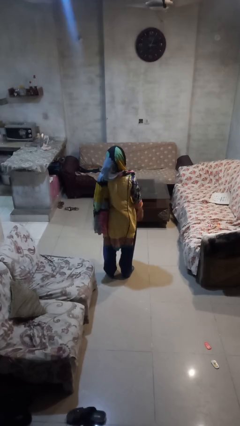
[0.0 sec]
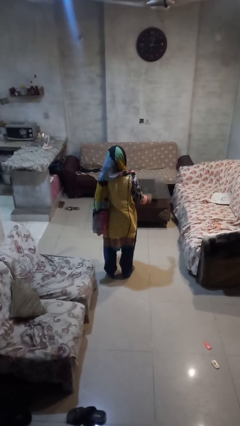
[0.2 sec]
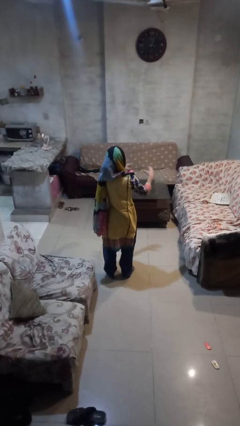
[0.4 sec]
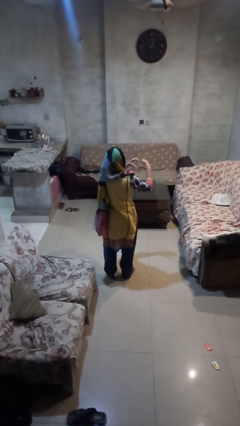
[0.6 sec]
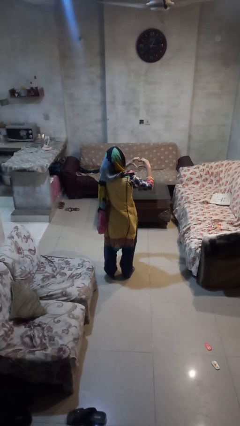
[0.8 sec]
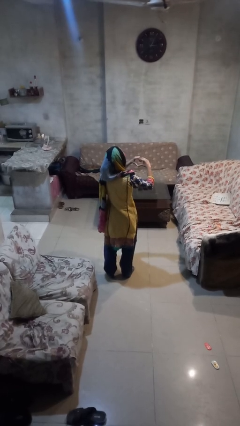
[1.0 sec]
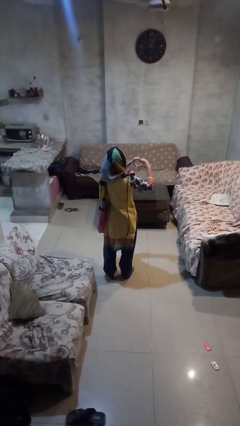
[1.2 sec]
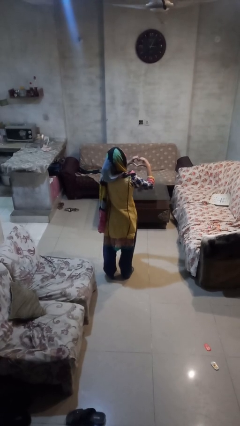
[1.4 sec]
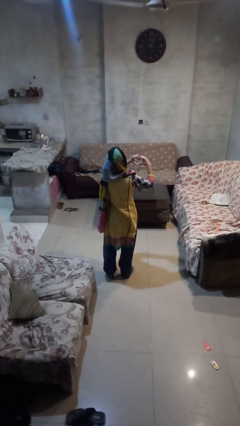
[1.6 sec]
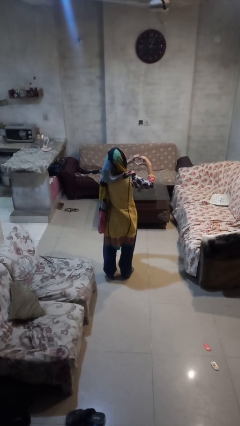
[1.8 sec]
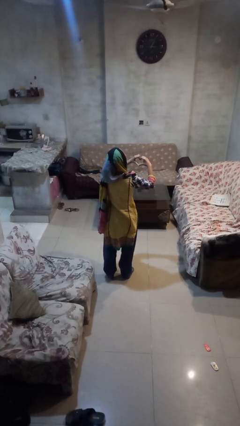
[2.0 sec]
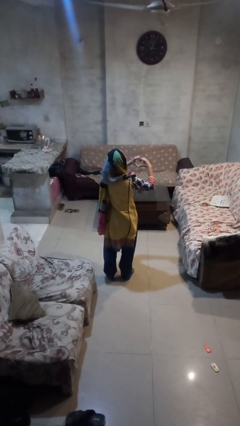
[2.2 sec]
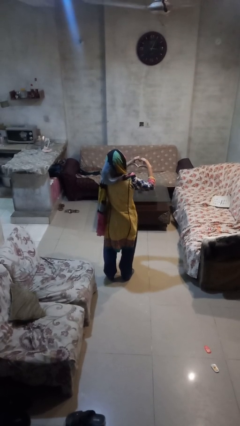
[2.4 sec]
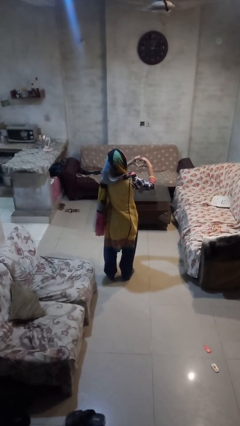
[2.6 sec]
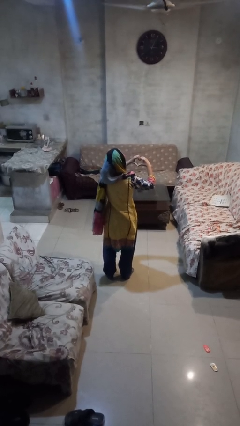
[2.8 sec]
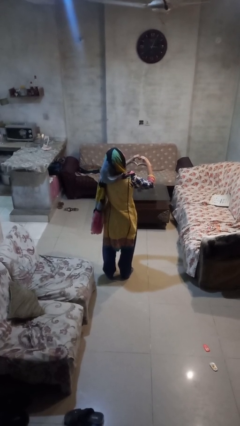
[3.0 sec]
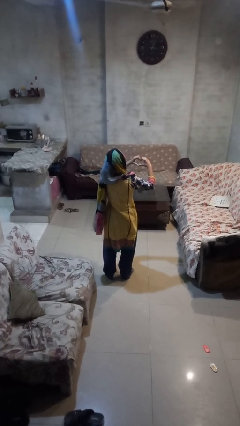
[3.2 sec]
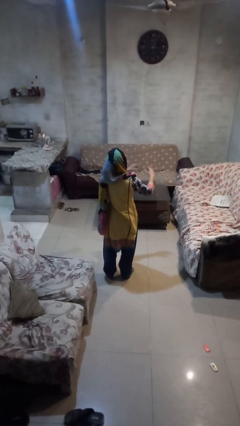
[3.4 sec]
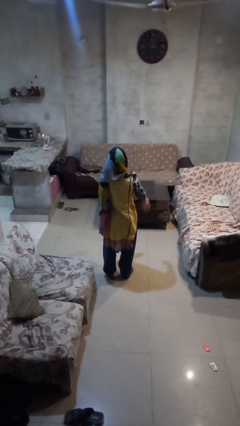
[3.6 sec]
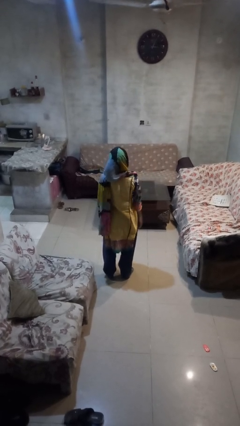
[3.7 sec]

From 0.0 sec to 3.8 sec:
person gestures heart

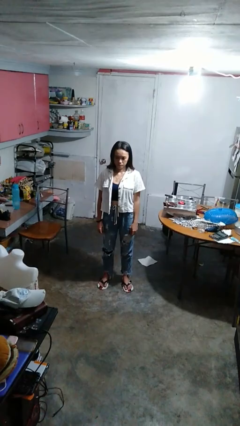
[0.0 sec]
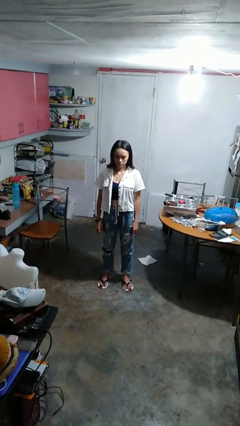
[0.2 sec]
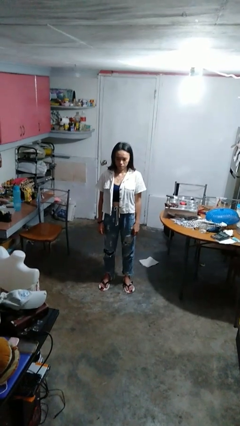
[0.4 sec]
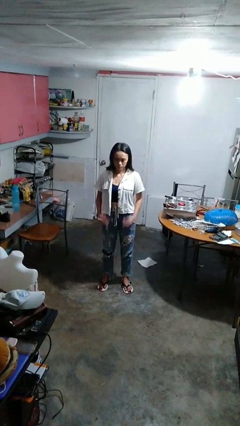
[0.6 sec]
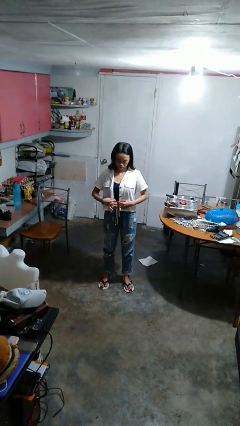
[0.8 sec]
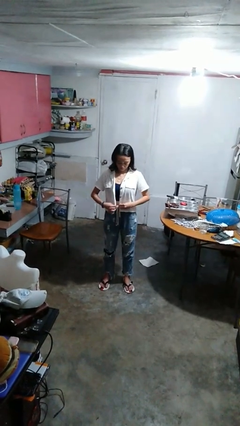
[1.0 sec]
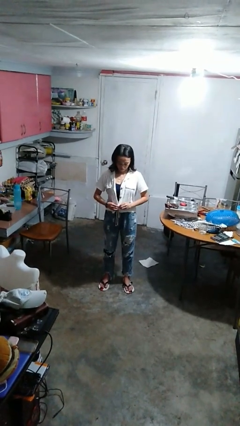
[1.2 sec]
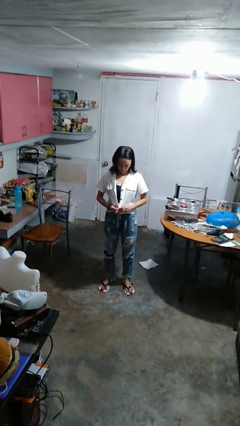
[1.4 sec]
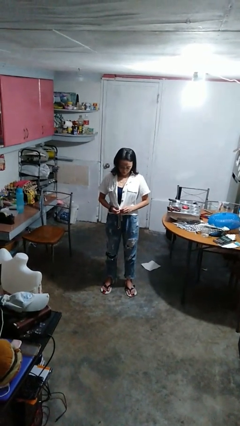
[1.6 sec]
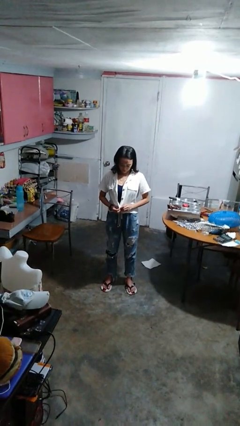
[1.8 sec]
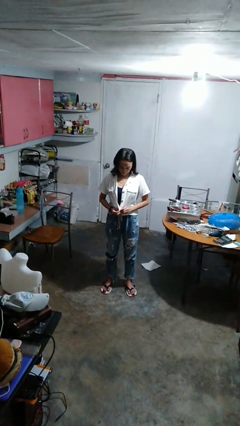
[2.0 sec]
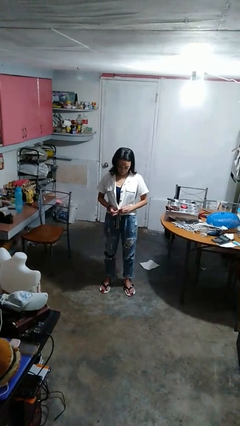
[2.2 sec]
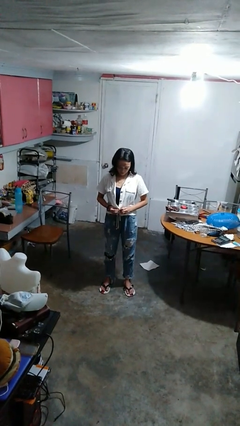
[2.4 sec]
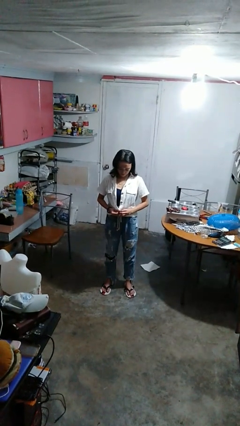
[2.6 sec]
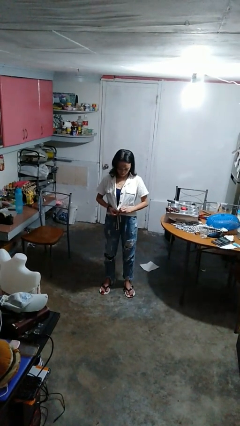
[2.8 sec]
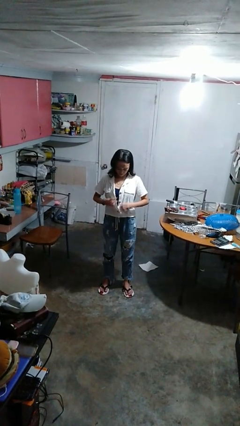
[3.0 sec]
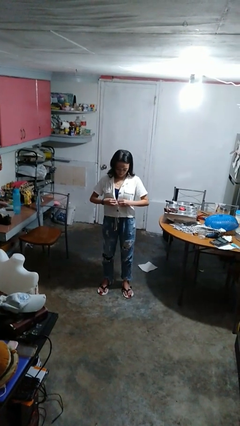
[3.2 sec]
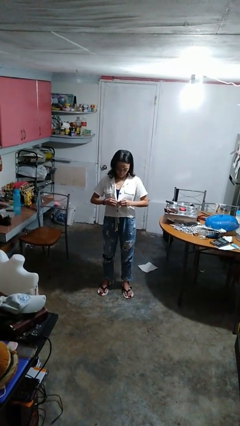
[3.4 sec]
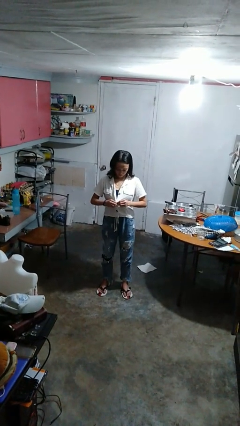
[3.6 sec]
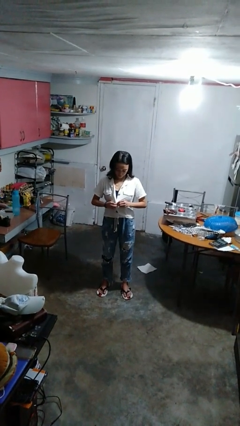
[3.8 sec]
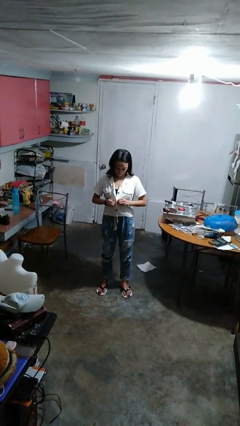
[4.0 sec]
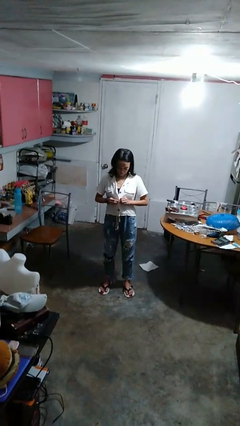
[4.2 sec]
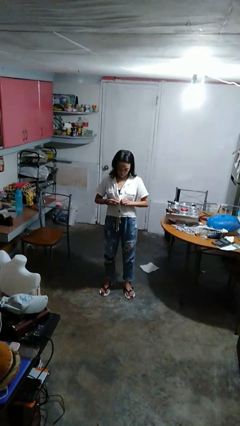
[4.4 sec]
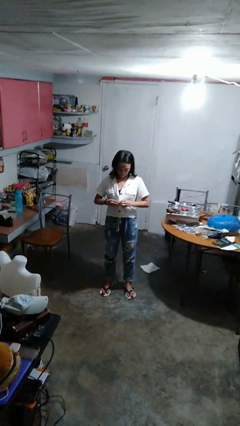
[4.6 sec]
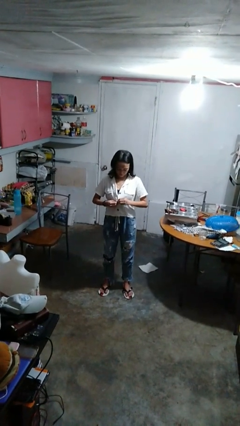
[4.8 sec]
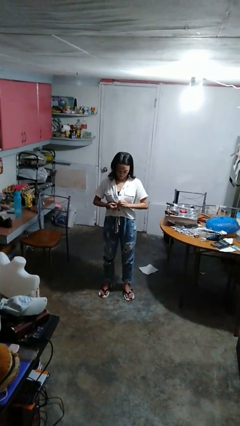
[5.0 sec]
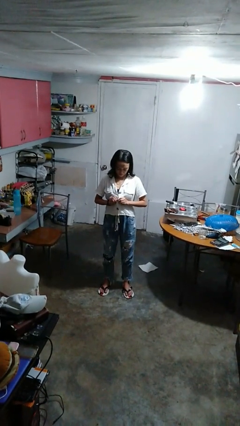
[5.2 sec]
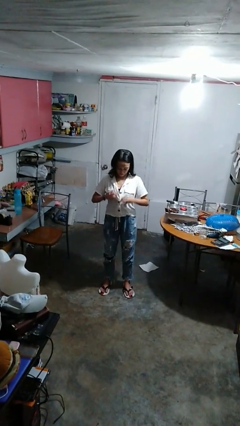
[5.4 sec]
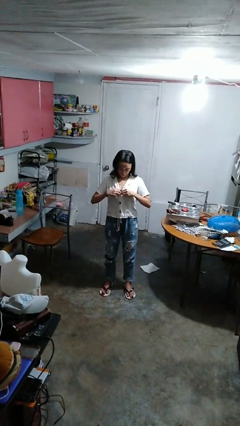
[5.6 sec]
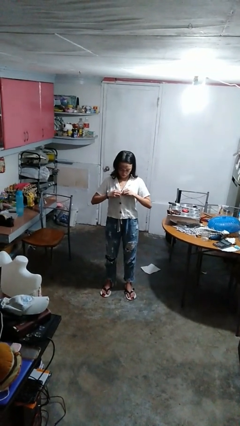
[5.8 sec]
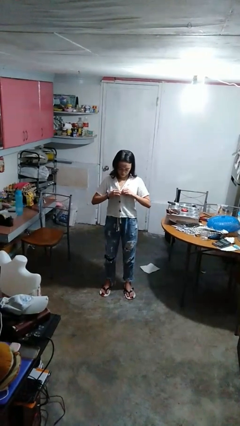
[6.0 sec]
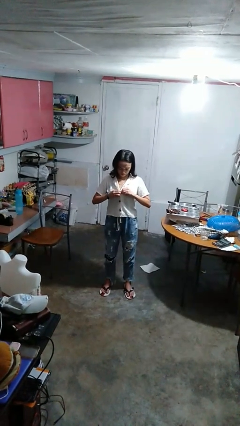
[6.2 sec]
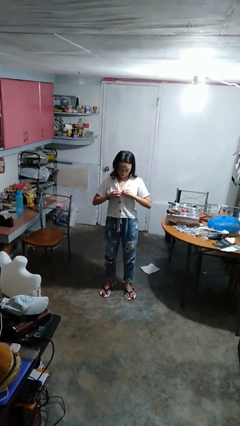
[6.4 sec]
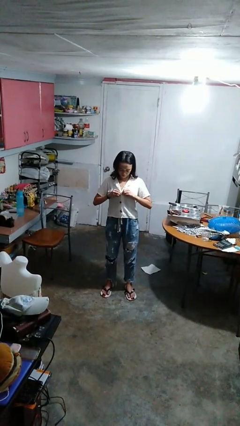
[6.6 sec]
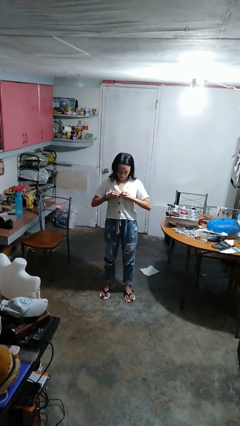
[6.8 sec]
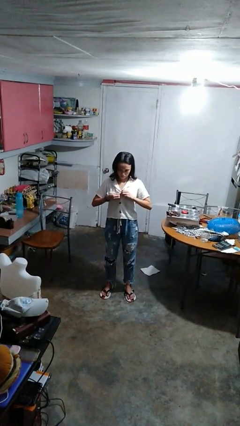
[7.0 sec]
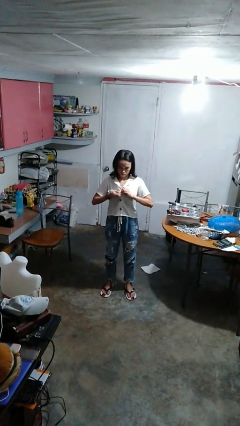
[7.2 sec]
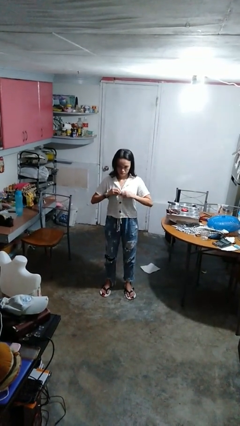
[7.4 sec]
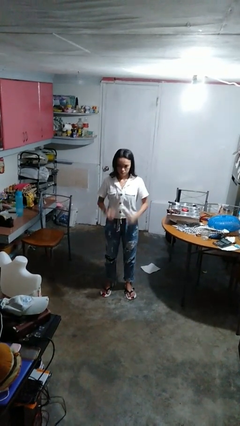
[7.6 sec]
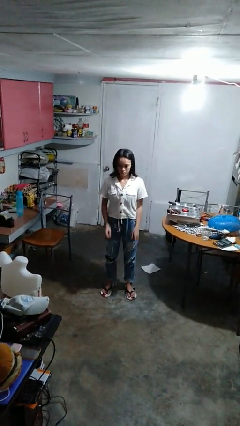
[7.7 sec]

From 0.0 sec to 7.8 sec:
person buttons shirt

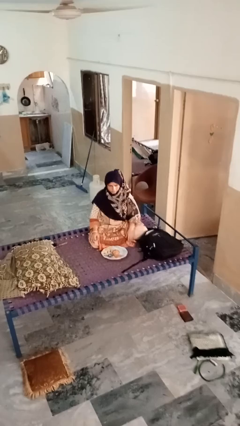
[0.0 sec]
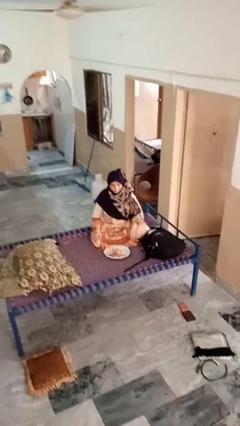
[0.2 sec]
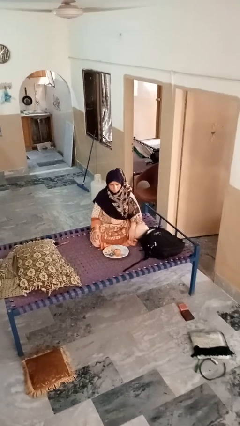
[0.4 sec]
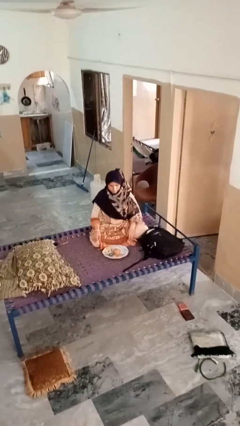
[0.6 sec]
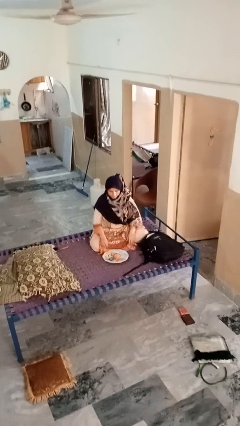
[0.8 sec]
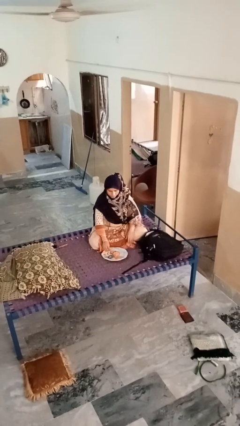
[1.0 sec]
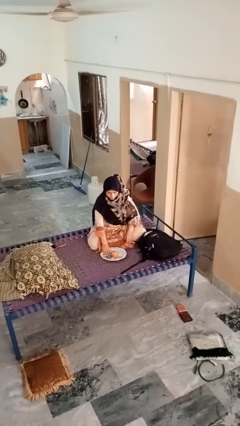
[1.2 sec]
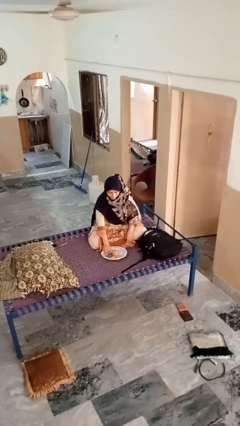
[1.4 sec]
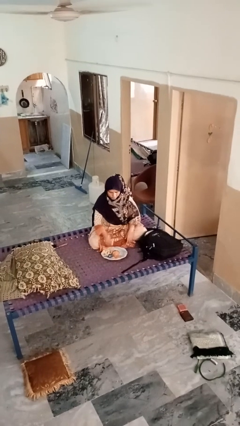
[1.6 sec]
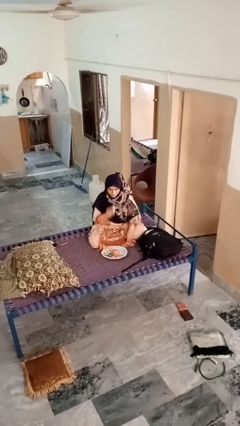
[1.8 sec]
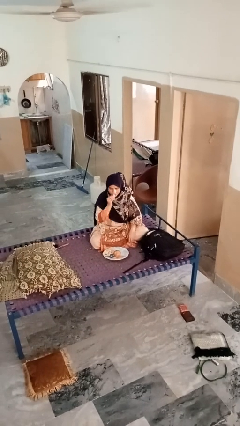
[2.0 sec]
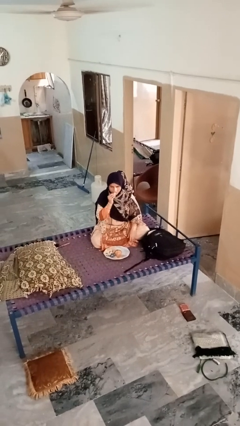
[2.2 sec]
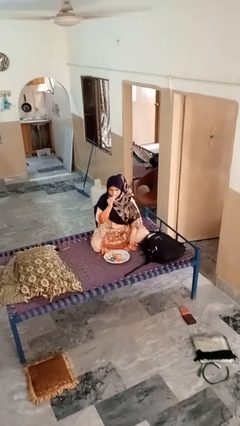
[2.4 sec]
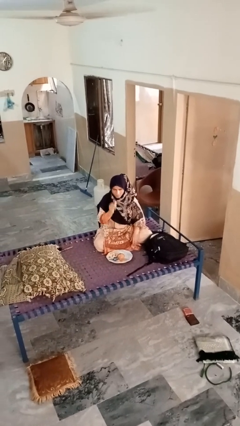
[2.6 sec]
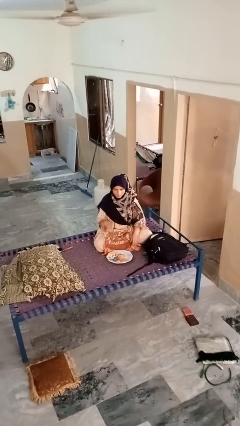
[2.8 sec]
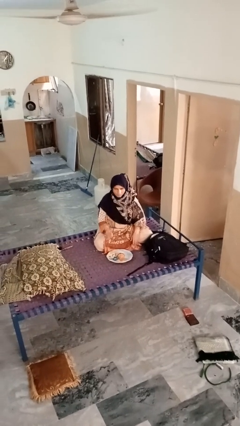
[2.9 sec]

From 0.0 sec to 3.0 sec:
person eats apple

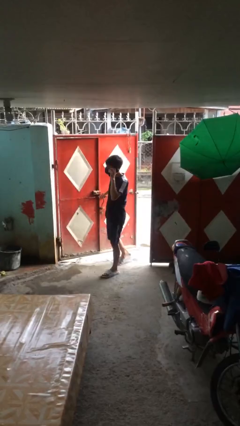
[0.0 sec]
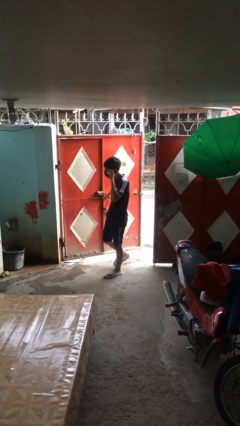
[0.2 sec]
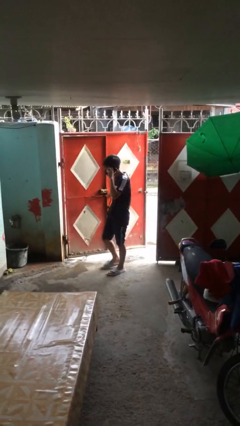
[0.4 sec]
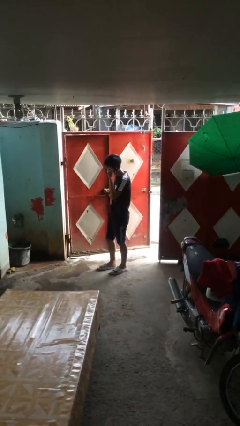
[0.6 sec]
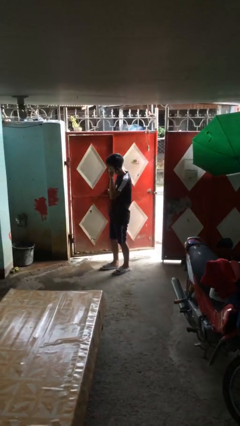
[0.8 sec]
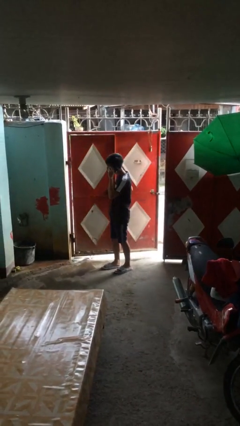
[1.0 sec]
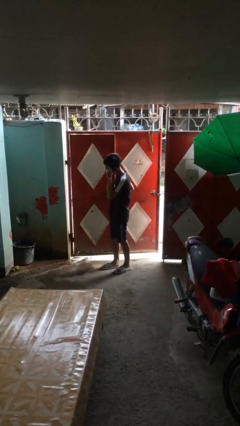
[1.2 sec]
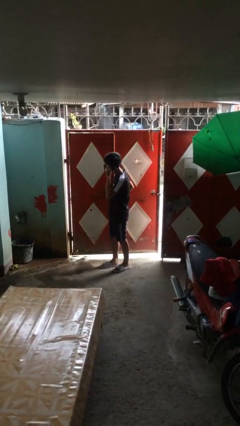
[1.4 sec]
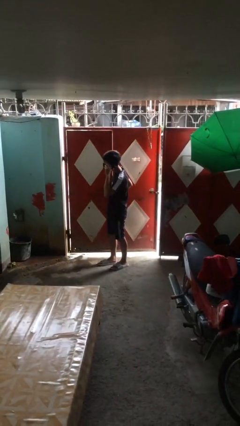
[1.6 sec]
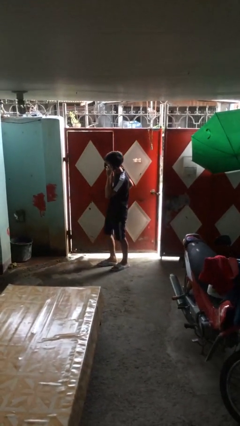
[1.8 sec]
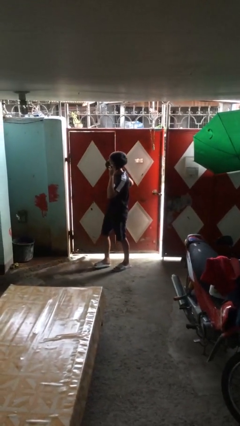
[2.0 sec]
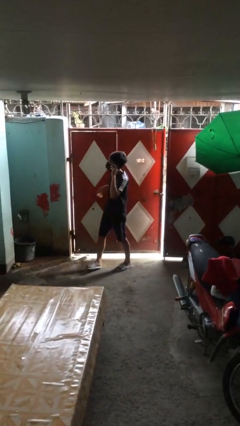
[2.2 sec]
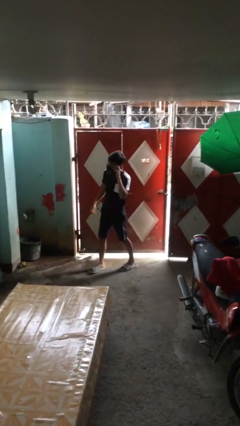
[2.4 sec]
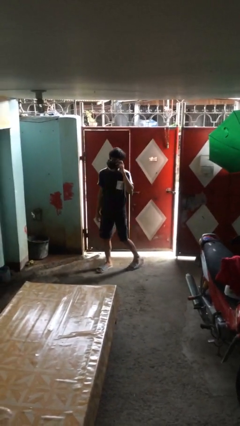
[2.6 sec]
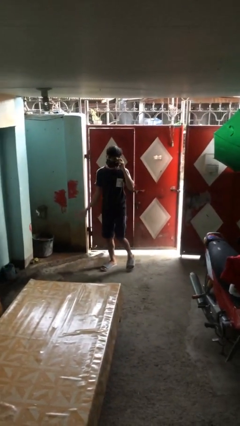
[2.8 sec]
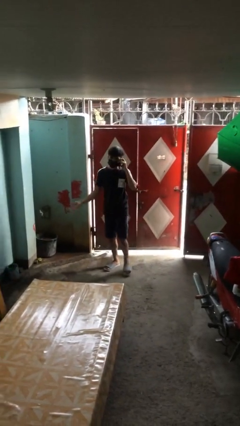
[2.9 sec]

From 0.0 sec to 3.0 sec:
person closes facility door
